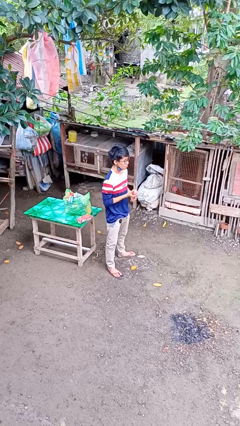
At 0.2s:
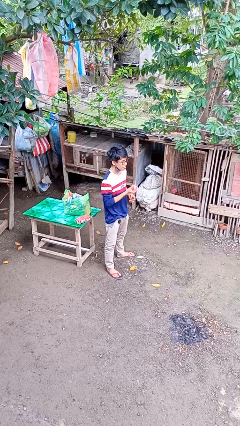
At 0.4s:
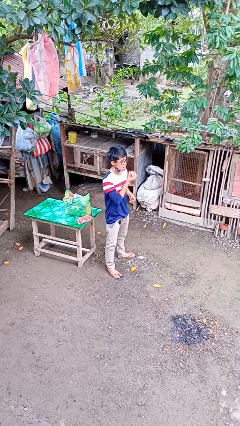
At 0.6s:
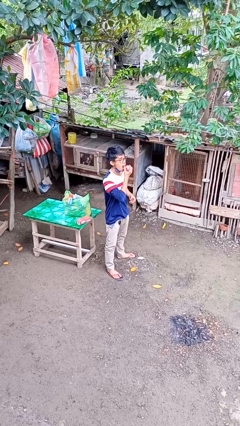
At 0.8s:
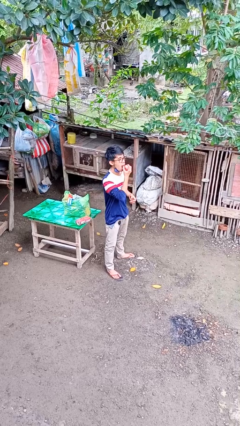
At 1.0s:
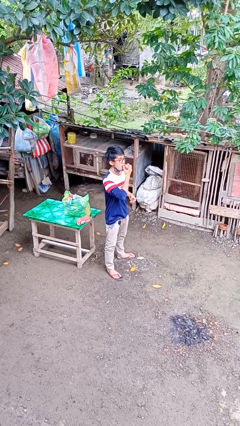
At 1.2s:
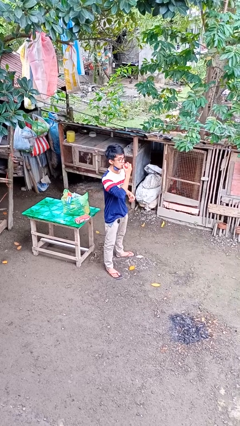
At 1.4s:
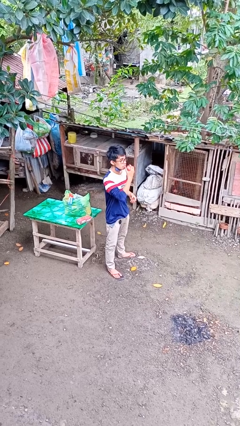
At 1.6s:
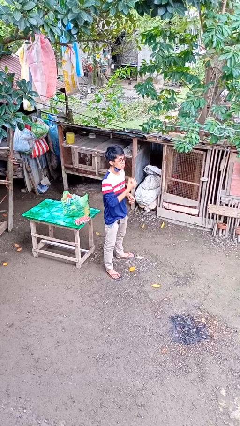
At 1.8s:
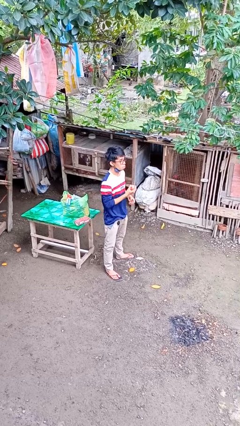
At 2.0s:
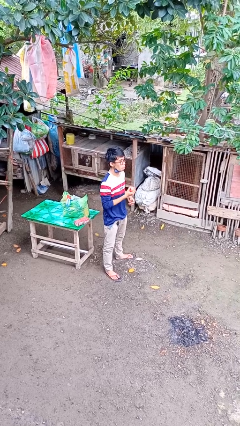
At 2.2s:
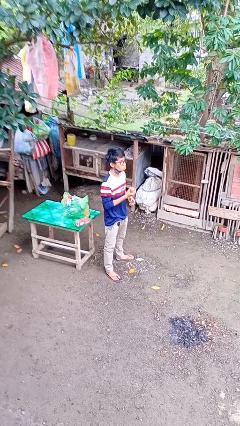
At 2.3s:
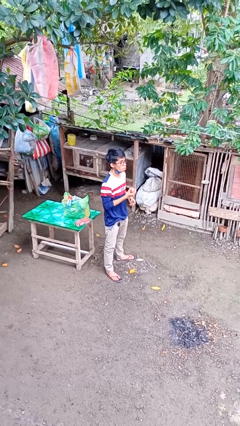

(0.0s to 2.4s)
person eats apple

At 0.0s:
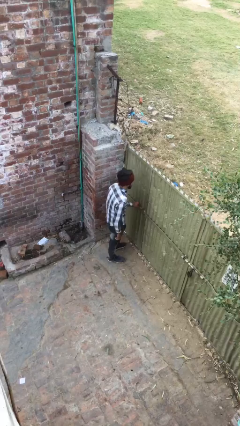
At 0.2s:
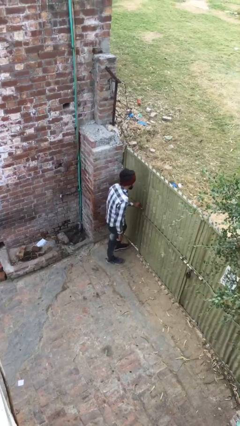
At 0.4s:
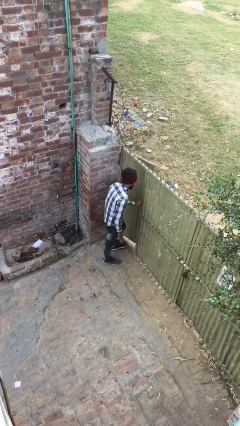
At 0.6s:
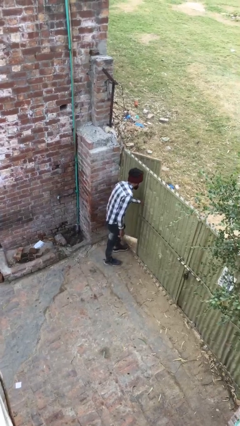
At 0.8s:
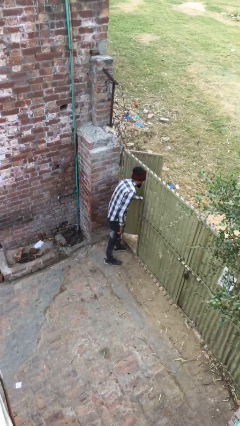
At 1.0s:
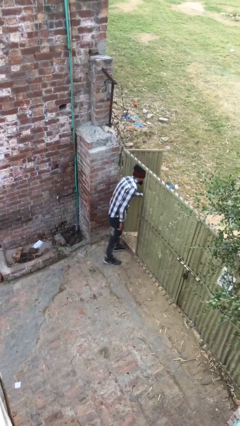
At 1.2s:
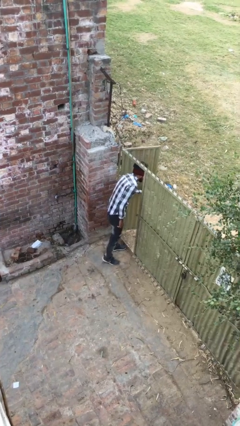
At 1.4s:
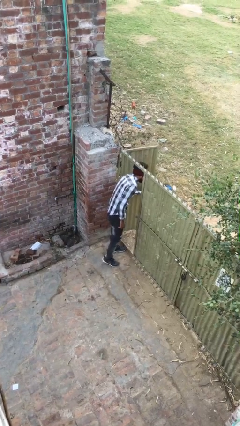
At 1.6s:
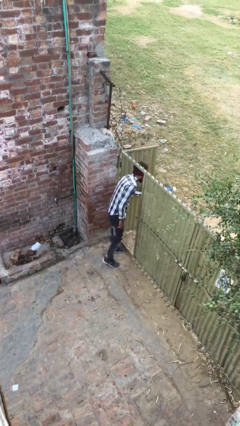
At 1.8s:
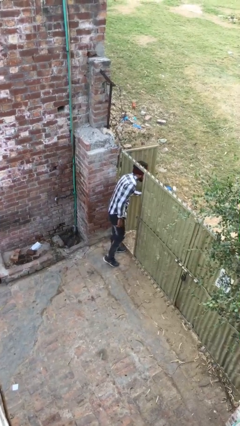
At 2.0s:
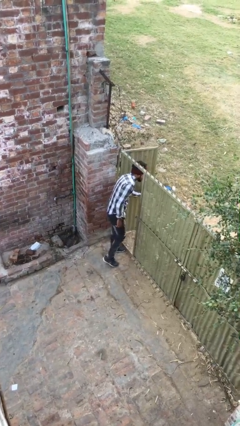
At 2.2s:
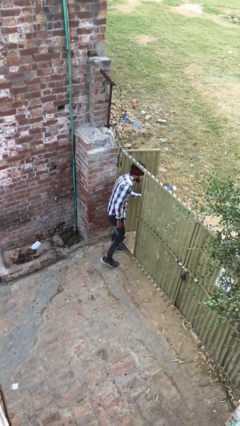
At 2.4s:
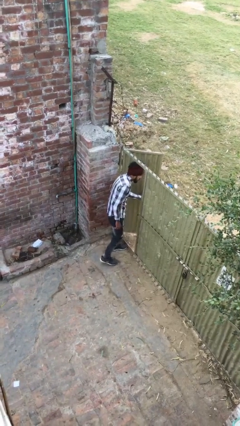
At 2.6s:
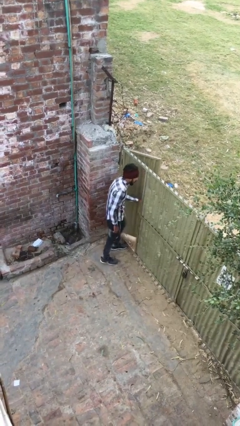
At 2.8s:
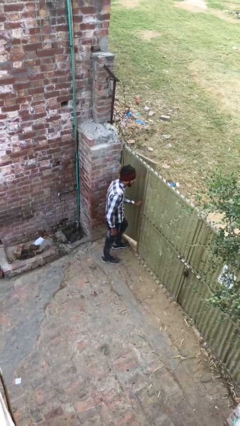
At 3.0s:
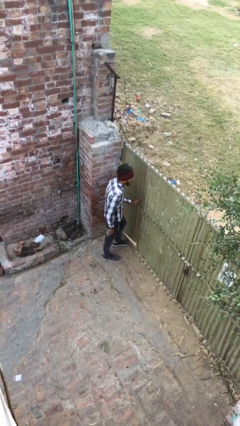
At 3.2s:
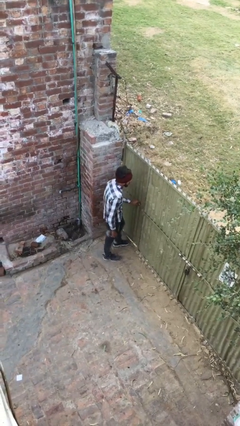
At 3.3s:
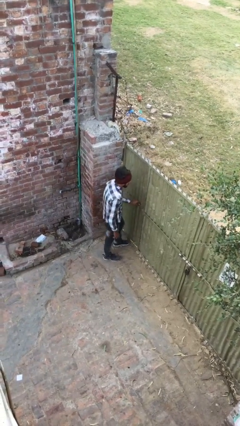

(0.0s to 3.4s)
person opens facility door

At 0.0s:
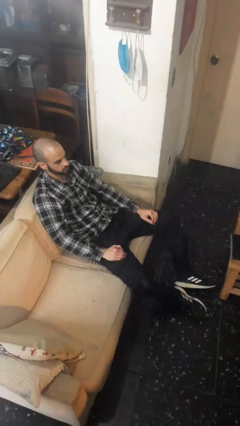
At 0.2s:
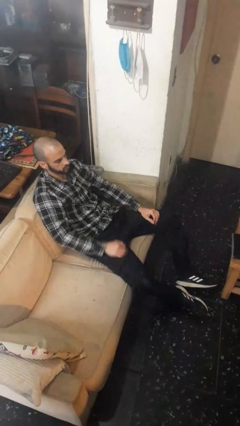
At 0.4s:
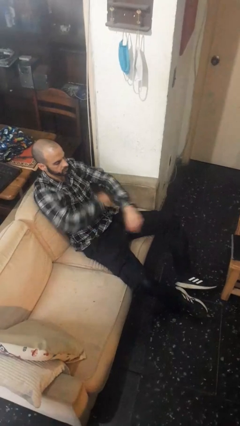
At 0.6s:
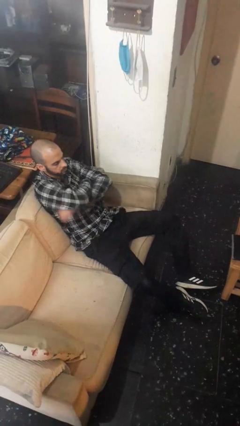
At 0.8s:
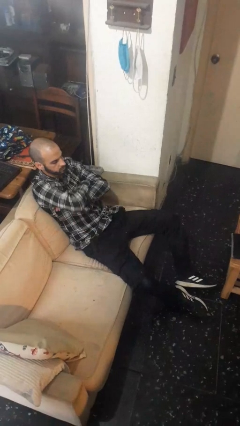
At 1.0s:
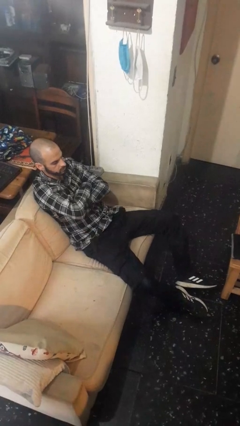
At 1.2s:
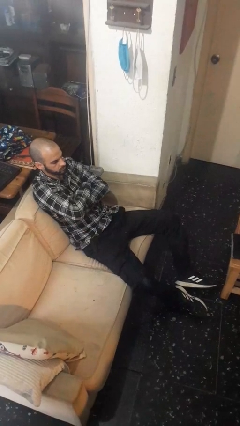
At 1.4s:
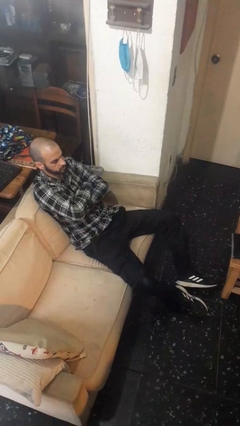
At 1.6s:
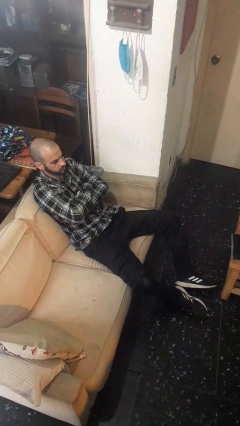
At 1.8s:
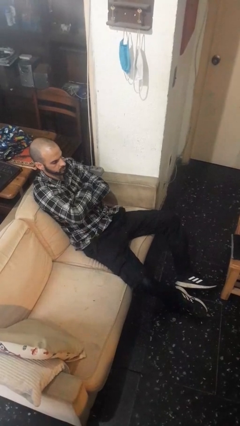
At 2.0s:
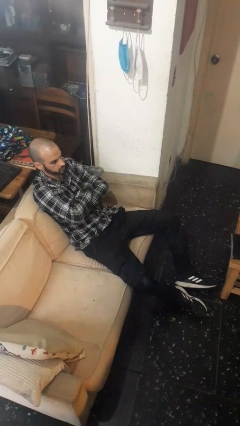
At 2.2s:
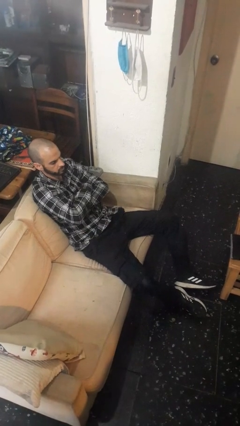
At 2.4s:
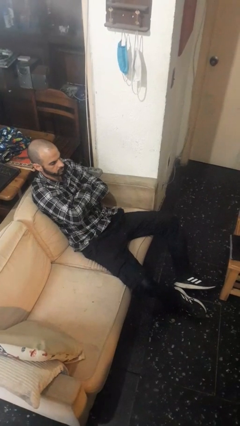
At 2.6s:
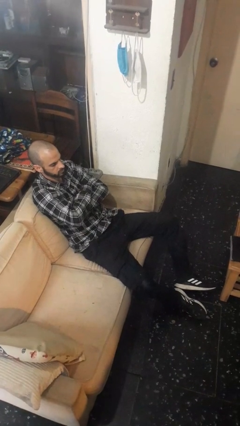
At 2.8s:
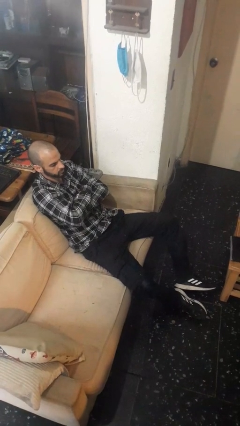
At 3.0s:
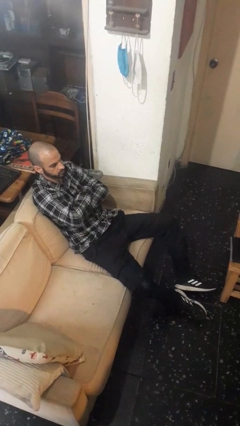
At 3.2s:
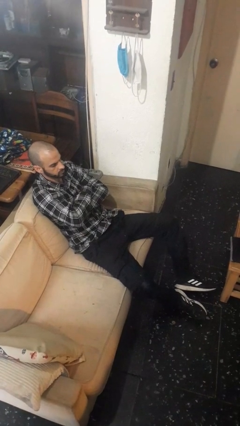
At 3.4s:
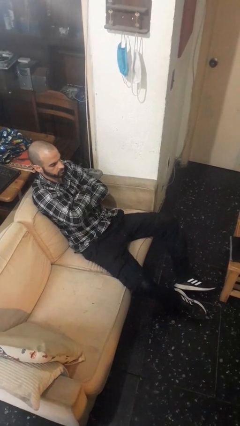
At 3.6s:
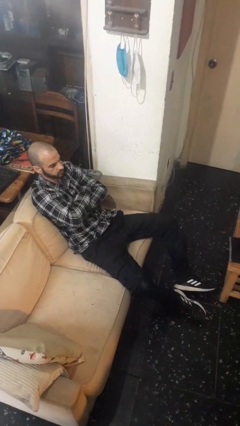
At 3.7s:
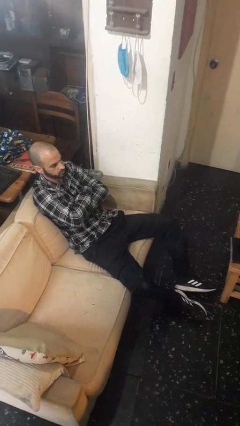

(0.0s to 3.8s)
person crosses arms

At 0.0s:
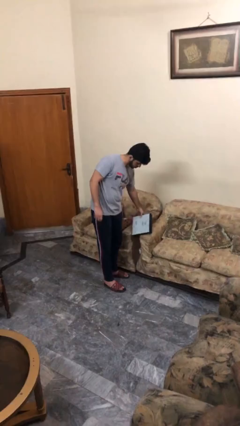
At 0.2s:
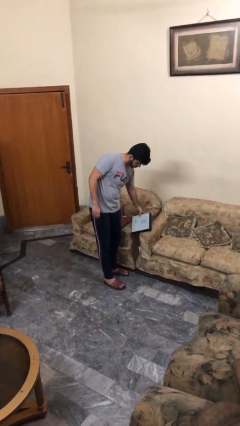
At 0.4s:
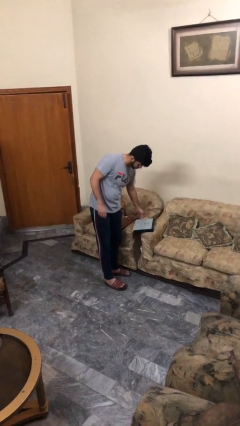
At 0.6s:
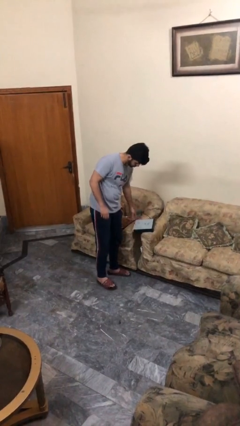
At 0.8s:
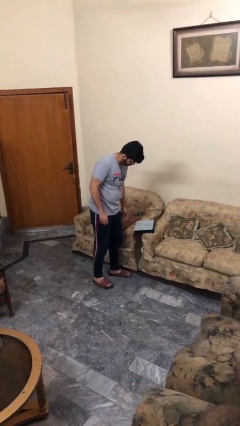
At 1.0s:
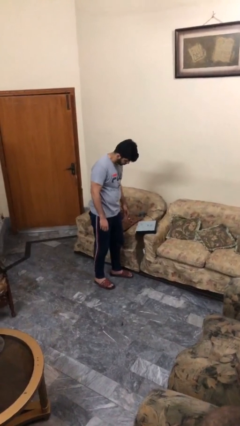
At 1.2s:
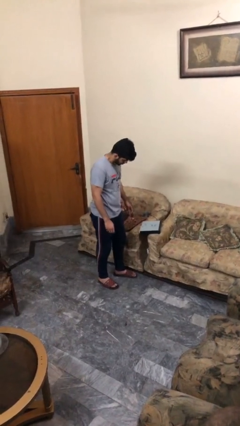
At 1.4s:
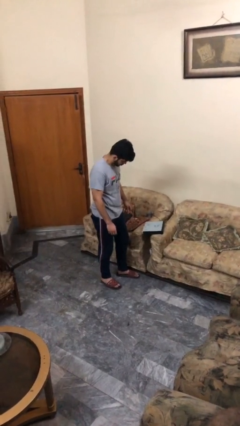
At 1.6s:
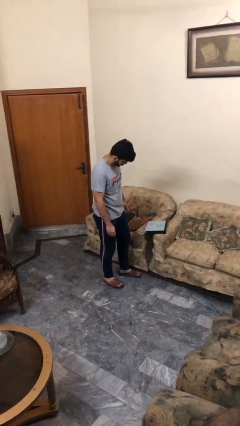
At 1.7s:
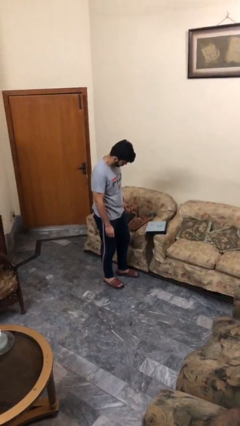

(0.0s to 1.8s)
person puts down object on couch

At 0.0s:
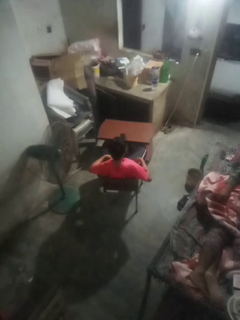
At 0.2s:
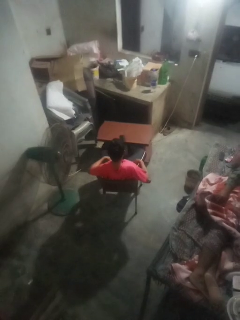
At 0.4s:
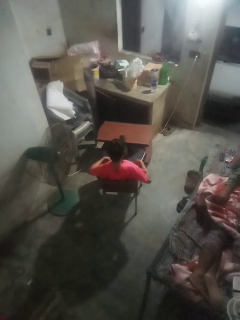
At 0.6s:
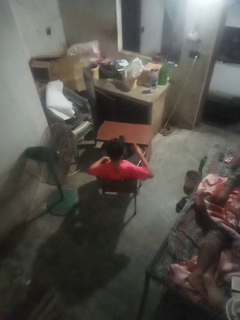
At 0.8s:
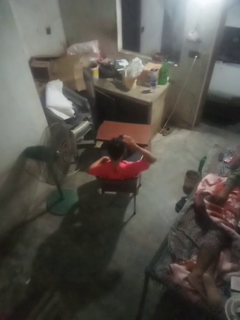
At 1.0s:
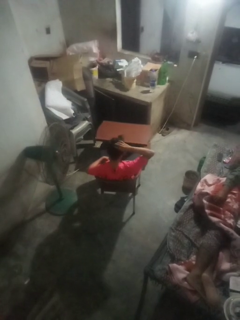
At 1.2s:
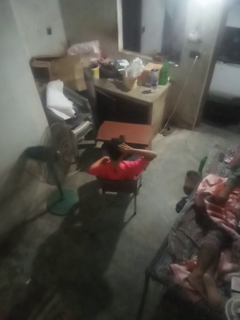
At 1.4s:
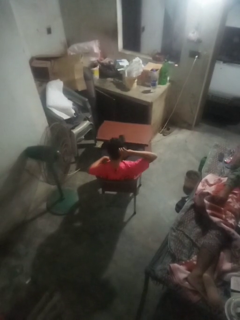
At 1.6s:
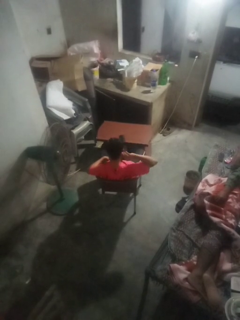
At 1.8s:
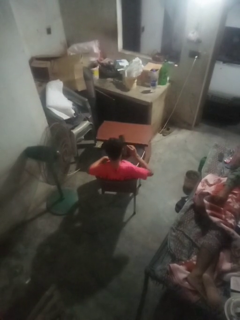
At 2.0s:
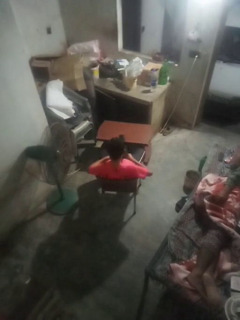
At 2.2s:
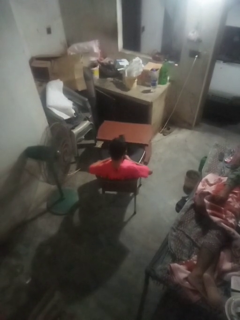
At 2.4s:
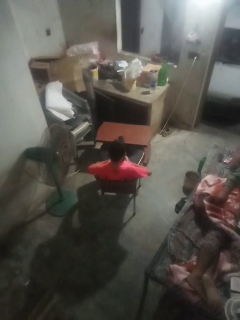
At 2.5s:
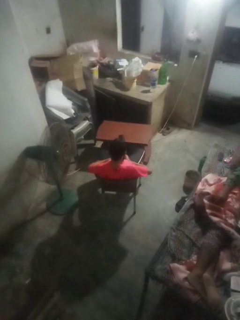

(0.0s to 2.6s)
person takes off hairtie

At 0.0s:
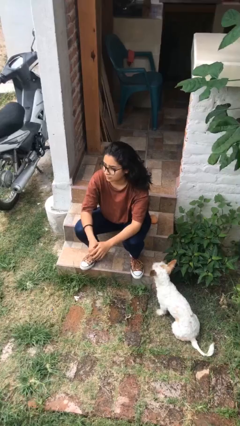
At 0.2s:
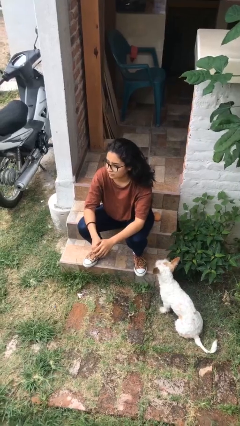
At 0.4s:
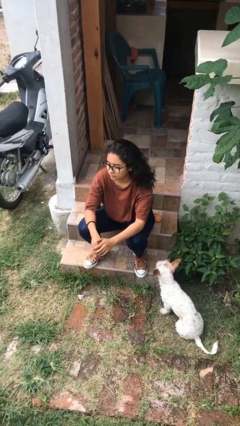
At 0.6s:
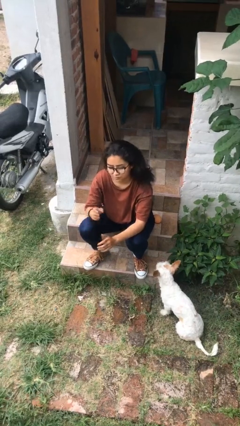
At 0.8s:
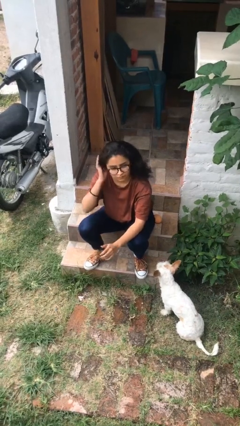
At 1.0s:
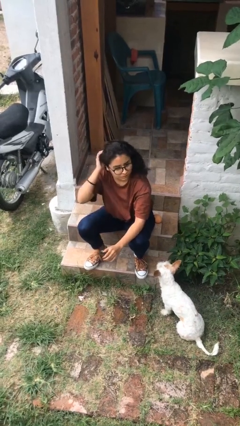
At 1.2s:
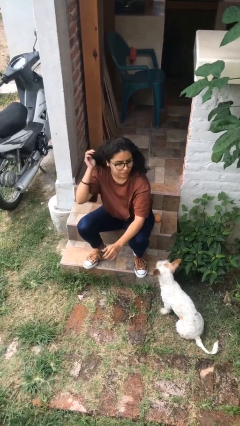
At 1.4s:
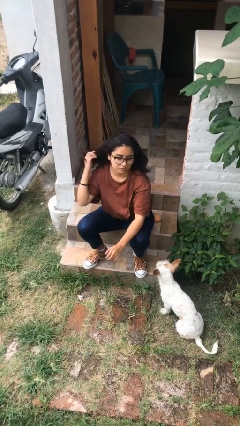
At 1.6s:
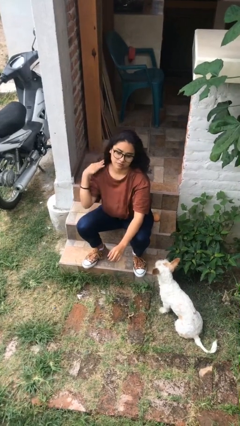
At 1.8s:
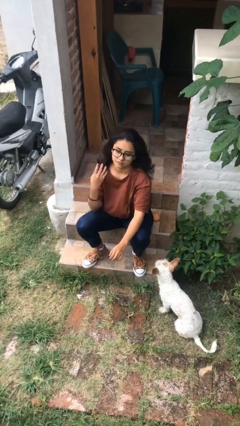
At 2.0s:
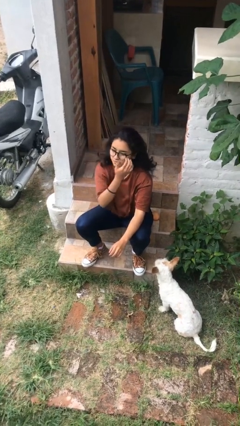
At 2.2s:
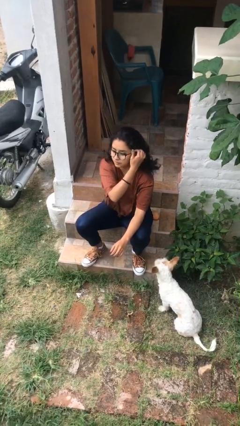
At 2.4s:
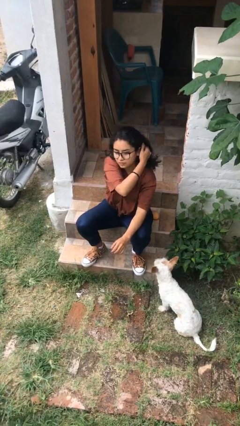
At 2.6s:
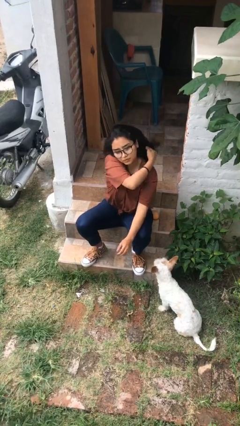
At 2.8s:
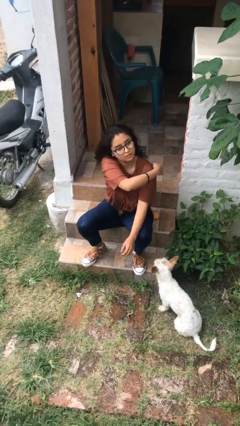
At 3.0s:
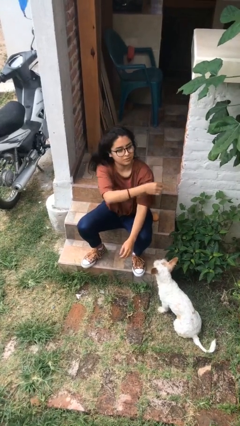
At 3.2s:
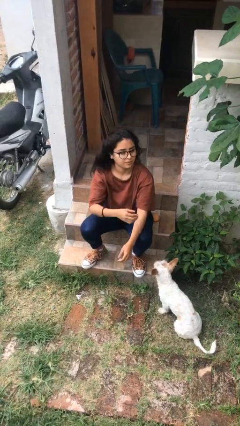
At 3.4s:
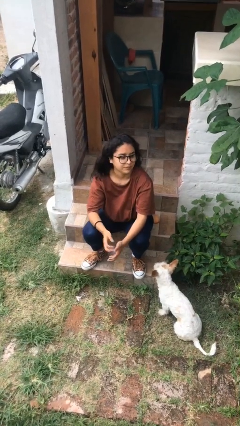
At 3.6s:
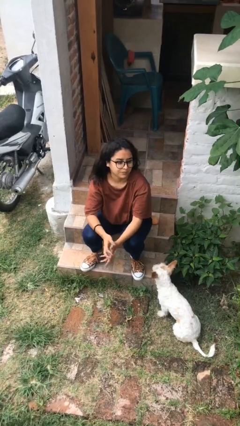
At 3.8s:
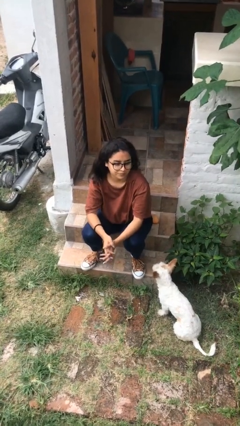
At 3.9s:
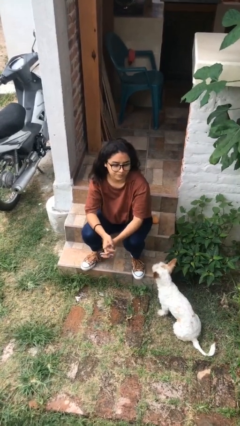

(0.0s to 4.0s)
person strokes hair

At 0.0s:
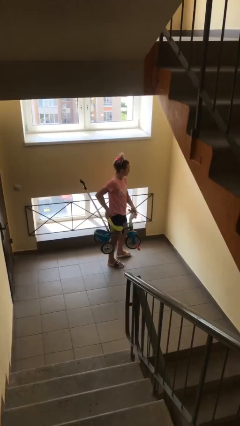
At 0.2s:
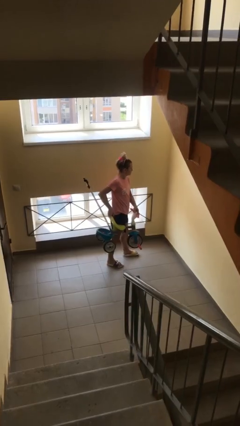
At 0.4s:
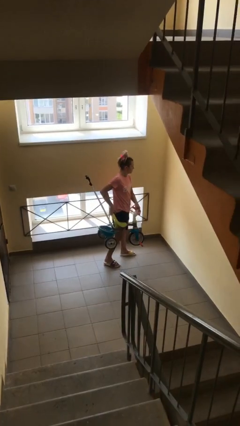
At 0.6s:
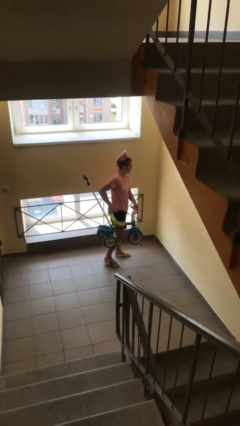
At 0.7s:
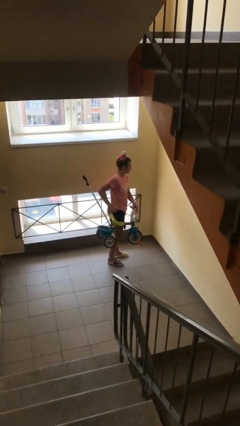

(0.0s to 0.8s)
person carries bicycle
